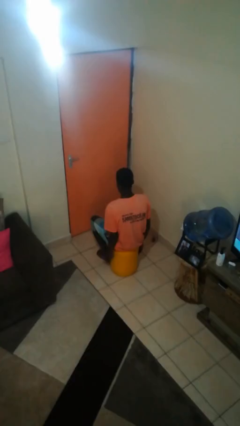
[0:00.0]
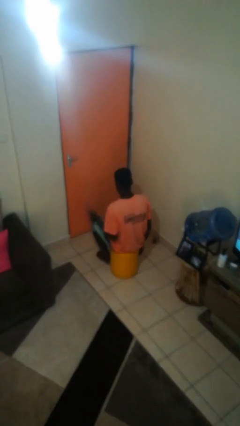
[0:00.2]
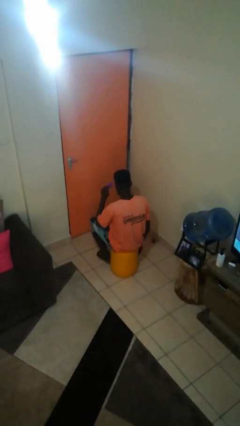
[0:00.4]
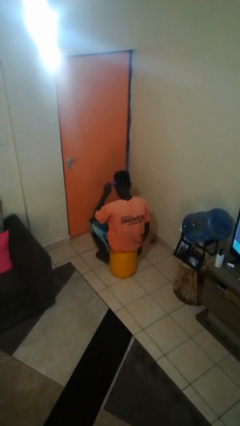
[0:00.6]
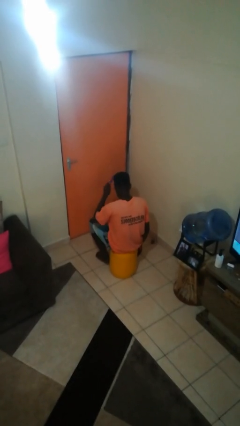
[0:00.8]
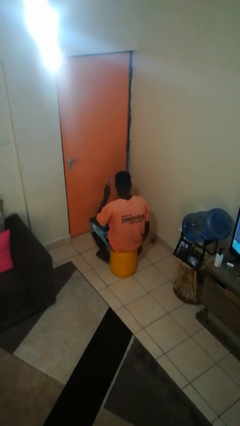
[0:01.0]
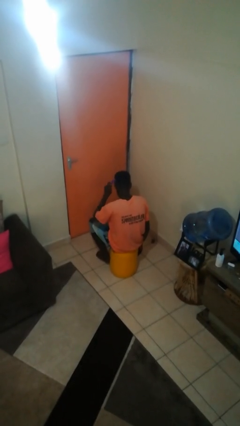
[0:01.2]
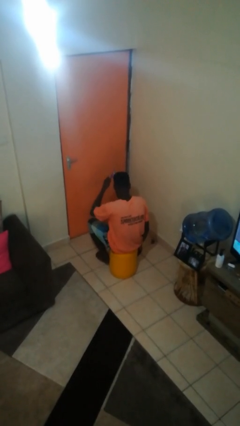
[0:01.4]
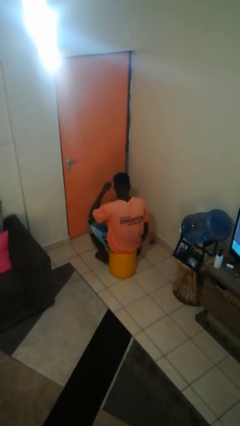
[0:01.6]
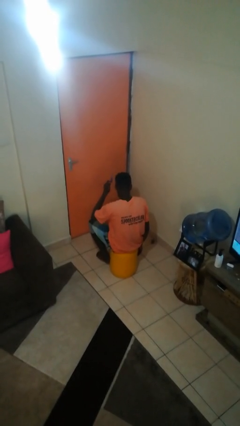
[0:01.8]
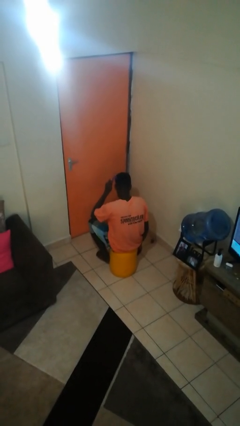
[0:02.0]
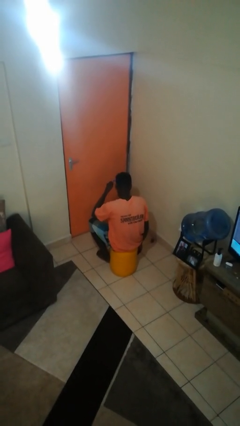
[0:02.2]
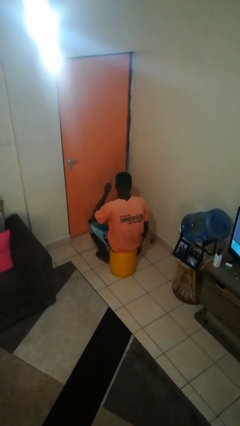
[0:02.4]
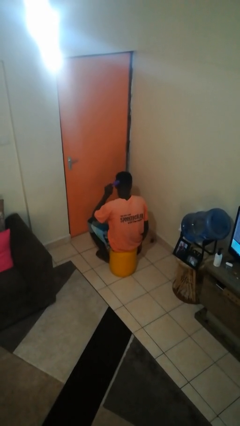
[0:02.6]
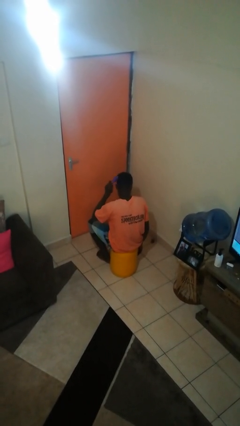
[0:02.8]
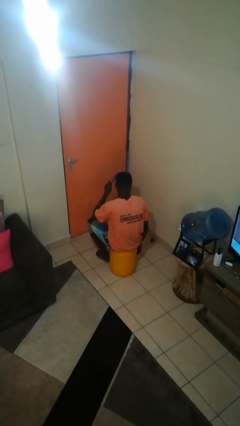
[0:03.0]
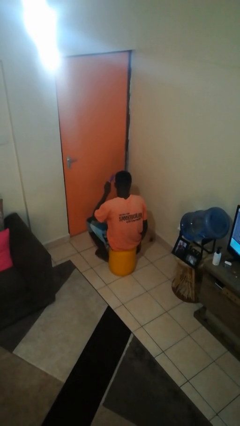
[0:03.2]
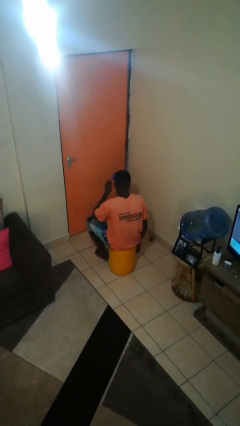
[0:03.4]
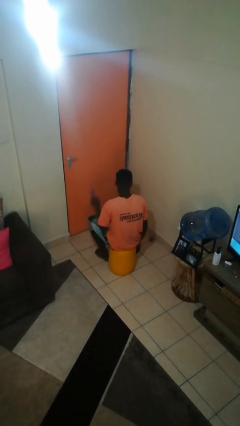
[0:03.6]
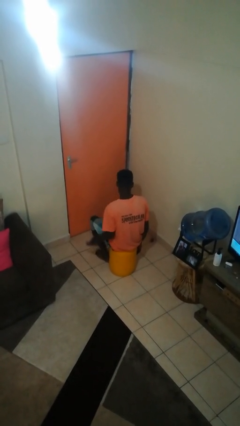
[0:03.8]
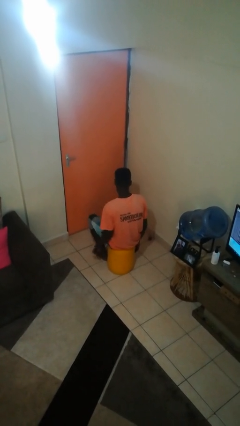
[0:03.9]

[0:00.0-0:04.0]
person brushes hair

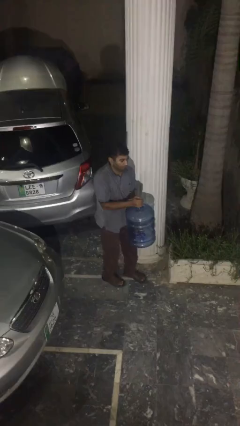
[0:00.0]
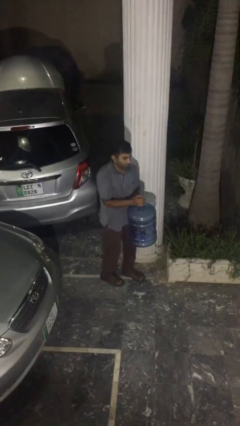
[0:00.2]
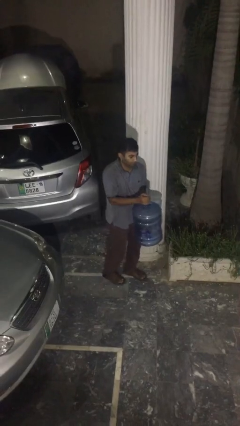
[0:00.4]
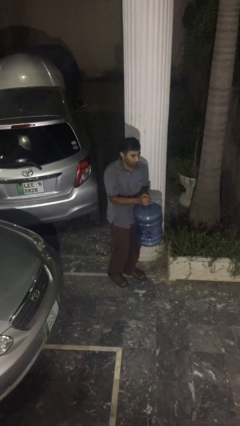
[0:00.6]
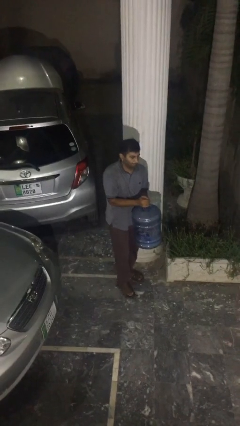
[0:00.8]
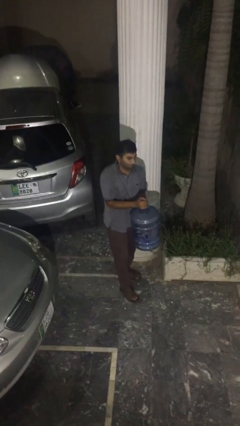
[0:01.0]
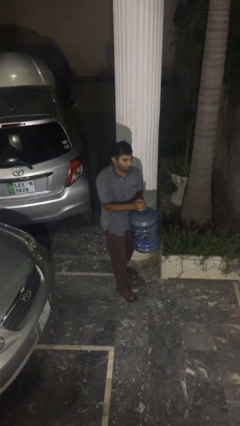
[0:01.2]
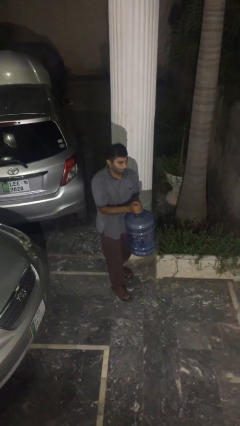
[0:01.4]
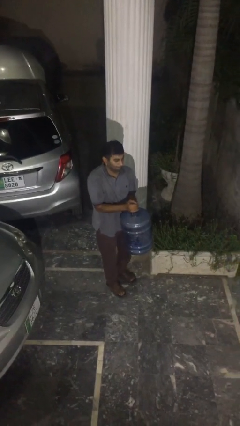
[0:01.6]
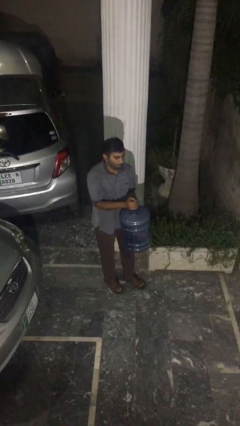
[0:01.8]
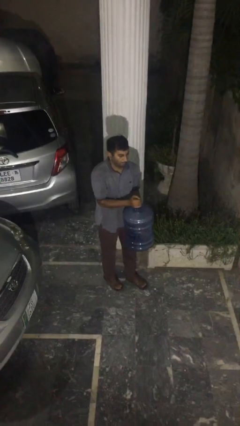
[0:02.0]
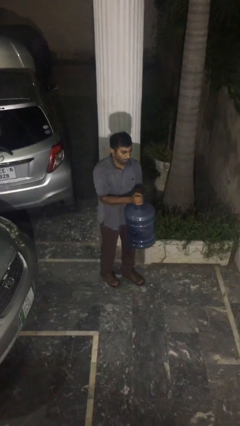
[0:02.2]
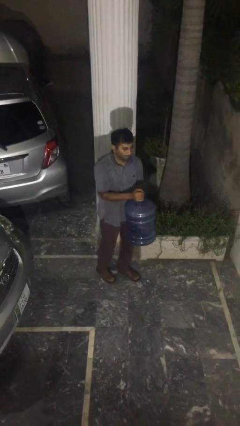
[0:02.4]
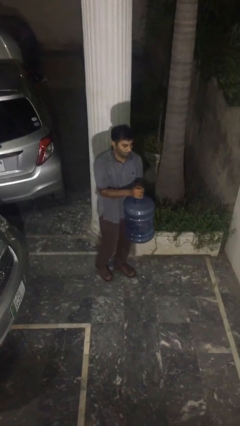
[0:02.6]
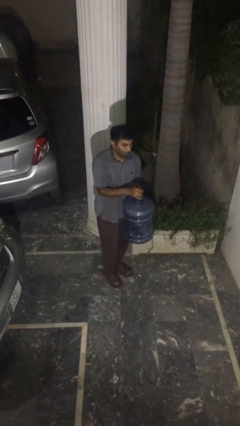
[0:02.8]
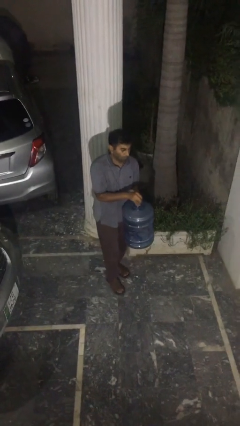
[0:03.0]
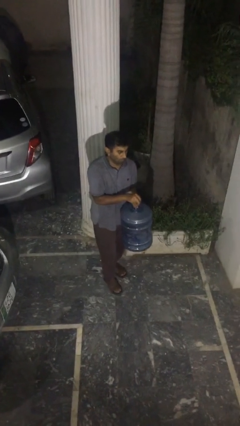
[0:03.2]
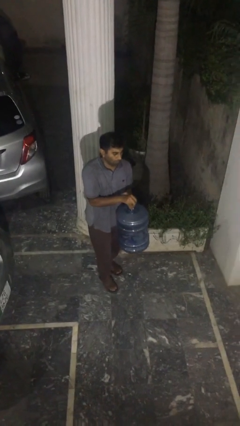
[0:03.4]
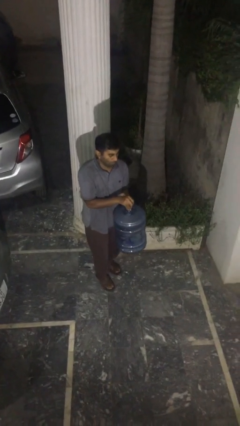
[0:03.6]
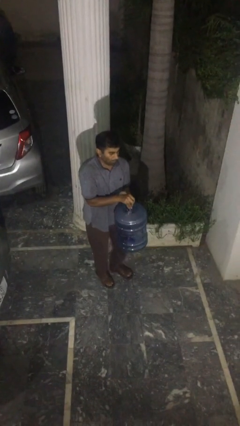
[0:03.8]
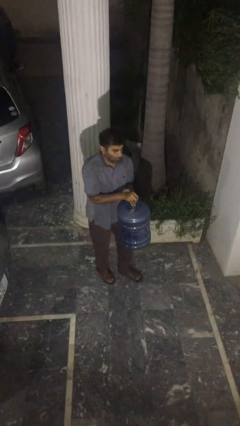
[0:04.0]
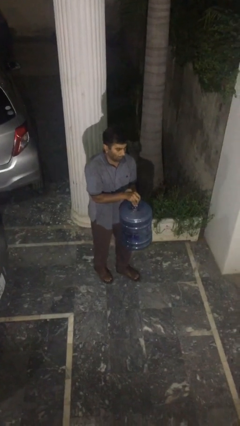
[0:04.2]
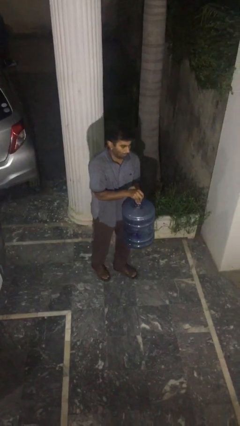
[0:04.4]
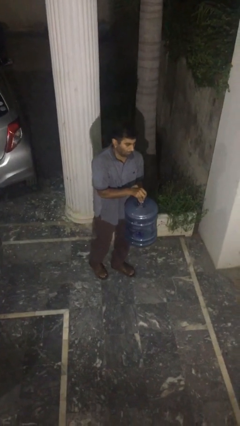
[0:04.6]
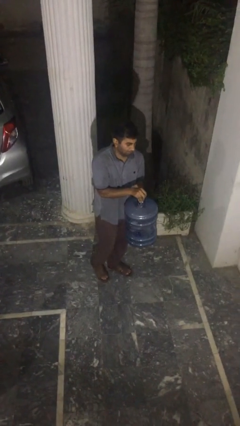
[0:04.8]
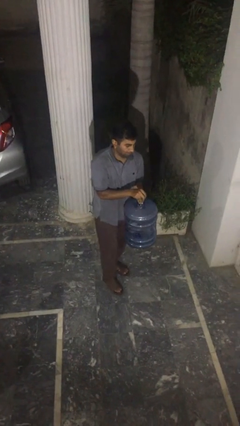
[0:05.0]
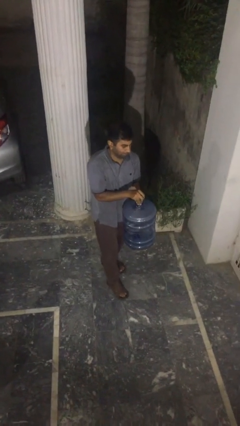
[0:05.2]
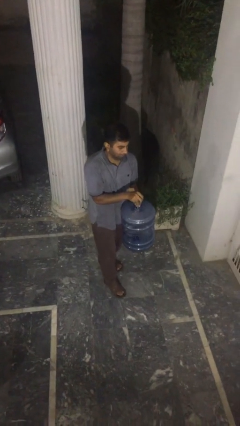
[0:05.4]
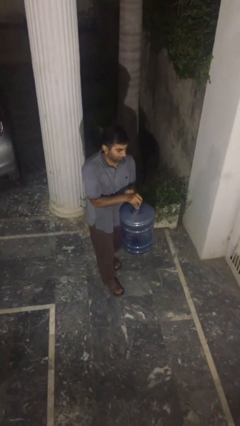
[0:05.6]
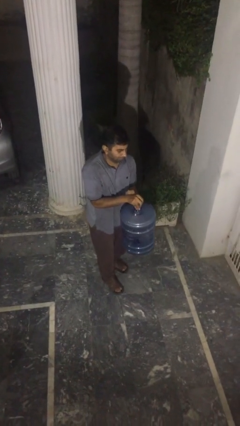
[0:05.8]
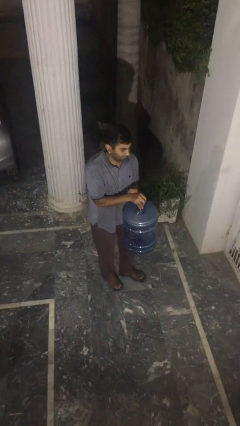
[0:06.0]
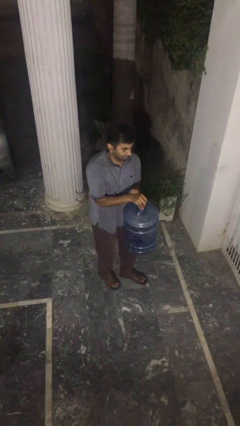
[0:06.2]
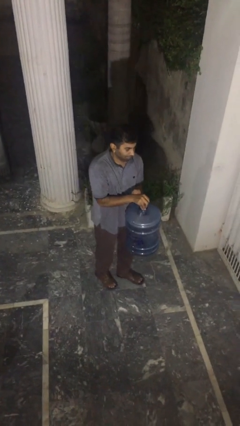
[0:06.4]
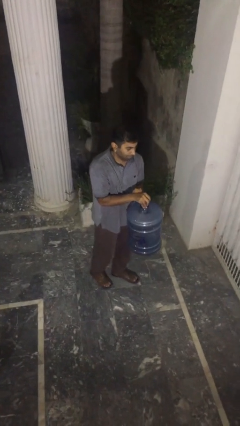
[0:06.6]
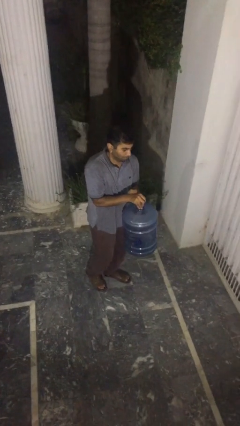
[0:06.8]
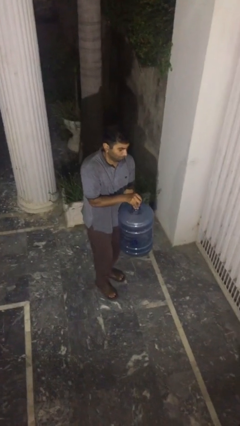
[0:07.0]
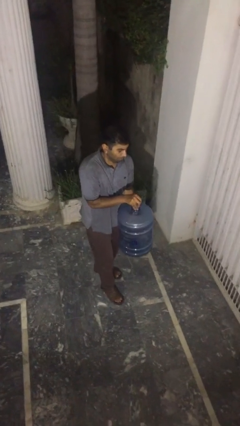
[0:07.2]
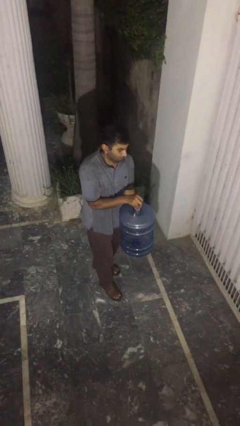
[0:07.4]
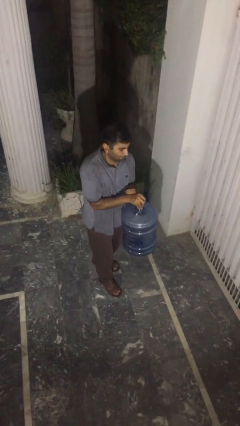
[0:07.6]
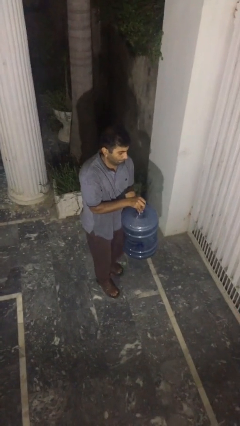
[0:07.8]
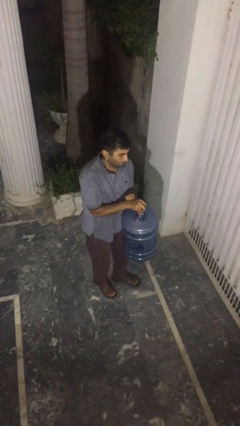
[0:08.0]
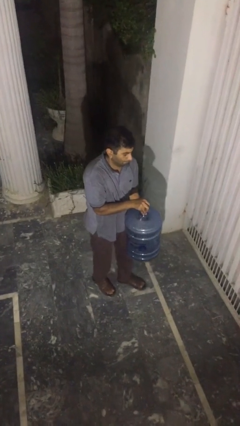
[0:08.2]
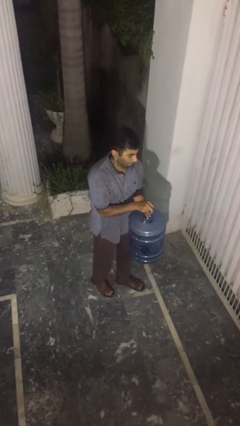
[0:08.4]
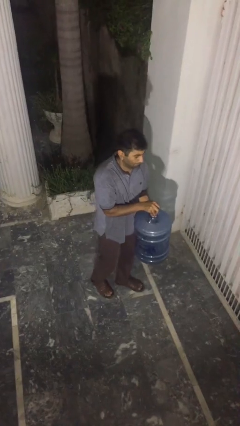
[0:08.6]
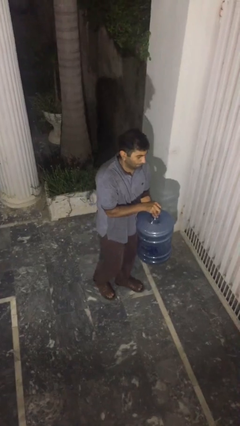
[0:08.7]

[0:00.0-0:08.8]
person carries heavy object

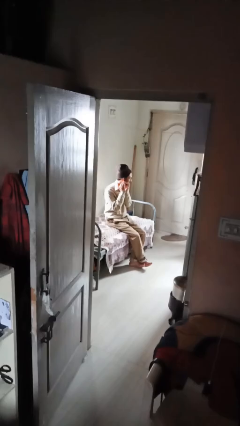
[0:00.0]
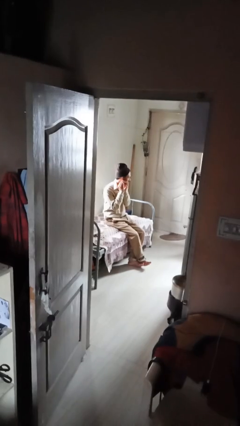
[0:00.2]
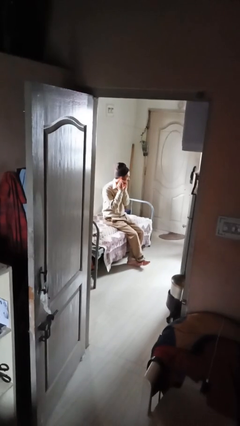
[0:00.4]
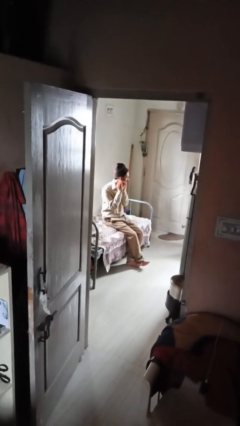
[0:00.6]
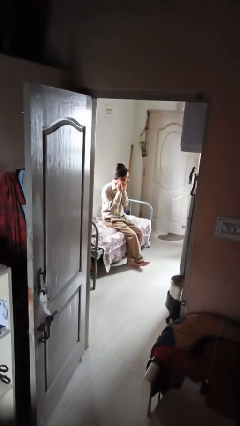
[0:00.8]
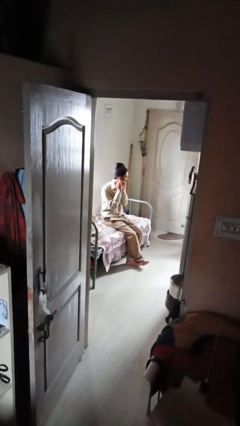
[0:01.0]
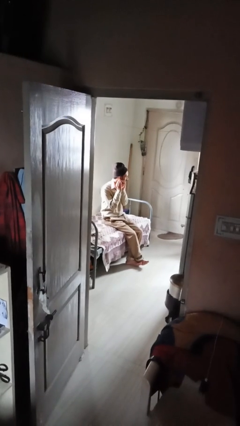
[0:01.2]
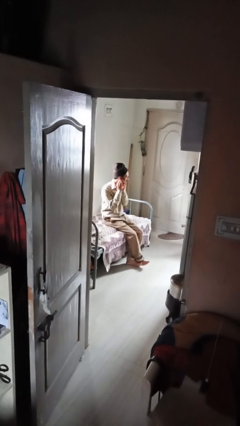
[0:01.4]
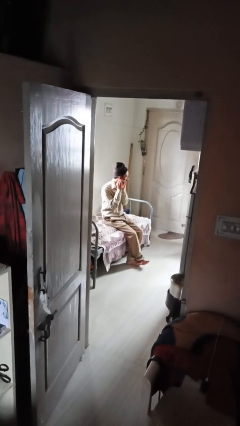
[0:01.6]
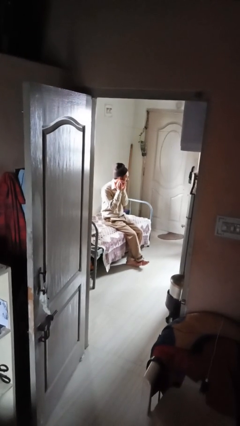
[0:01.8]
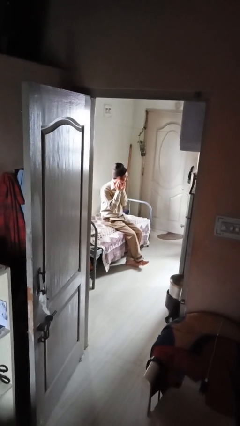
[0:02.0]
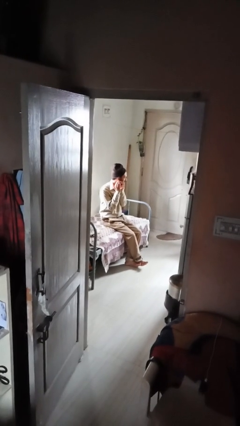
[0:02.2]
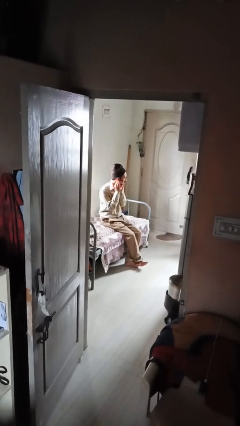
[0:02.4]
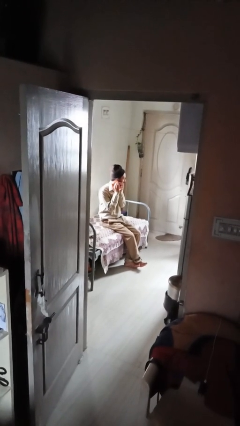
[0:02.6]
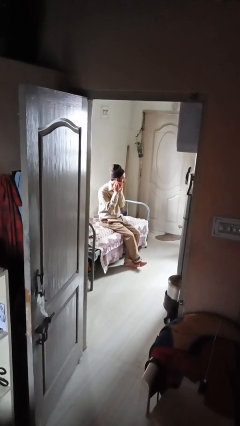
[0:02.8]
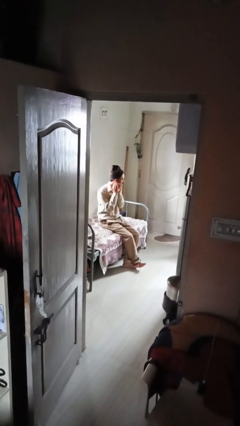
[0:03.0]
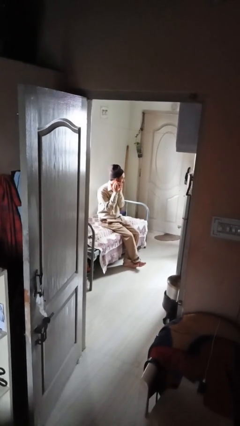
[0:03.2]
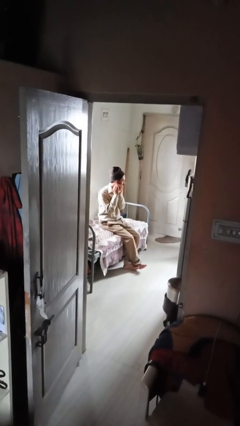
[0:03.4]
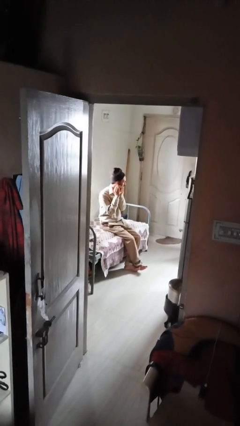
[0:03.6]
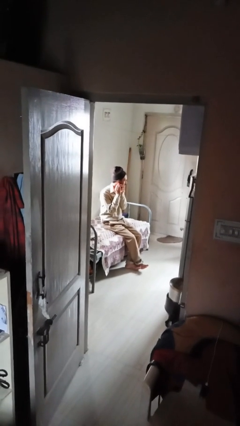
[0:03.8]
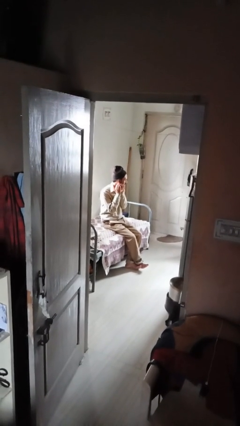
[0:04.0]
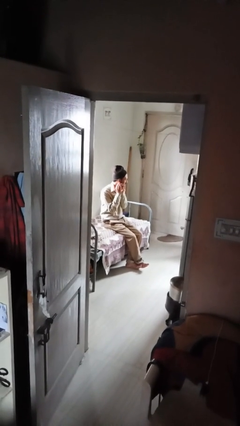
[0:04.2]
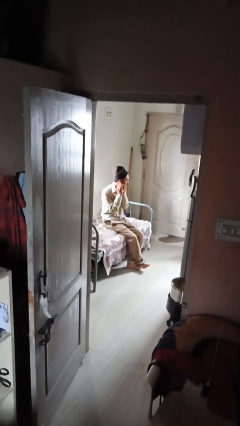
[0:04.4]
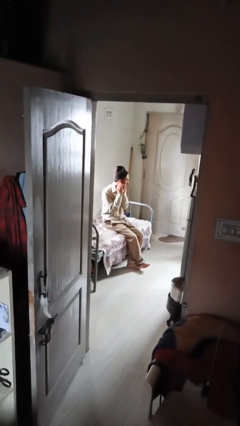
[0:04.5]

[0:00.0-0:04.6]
person puts on earrings

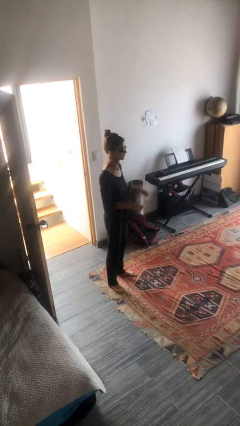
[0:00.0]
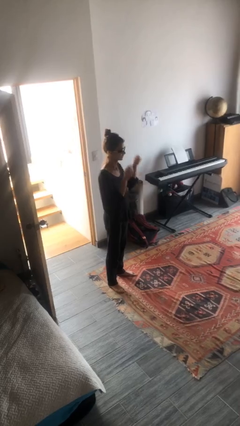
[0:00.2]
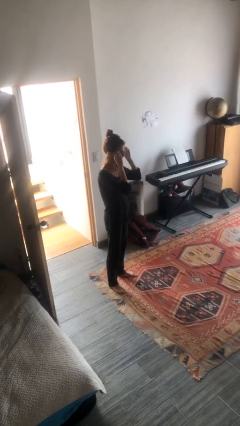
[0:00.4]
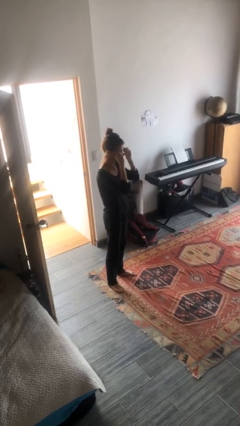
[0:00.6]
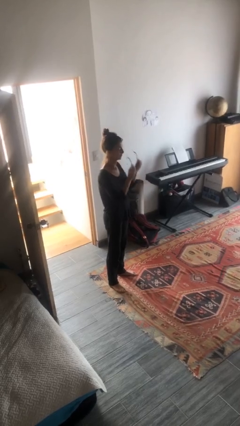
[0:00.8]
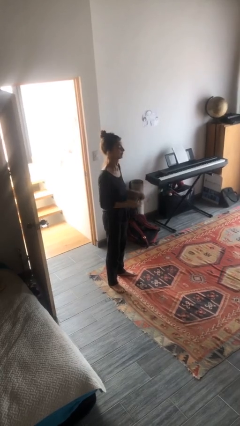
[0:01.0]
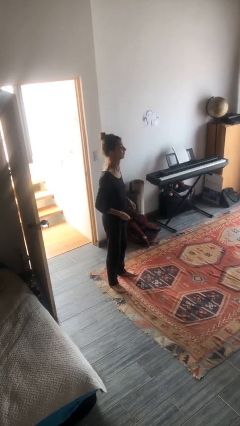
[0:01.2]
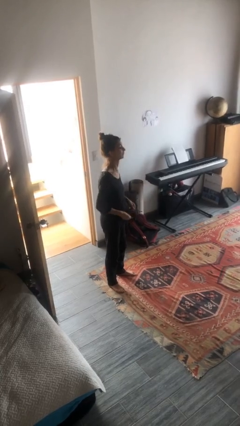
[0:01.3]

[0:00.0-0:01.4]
person takes off sunglasses
